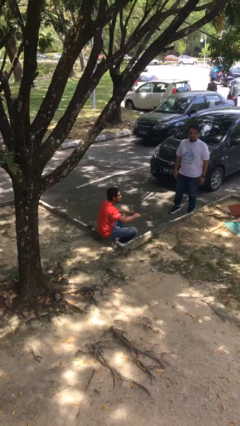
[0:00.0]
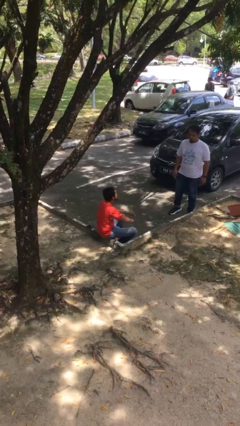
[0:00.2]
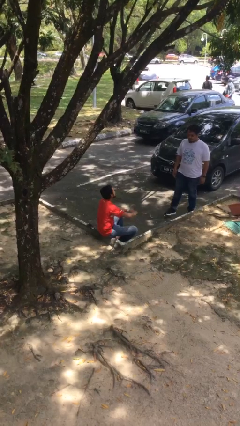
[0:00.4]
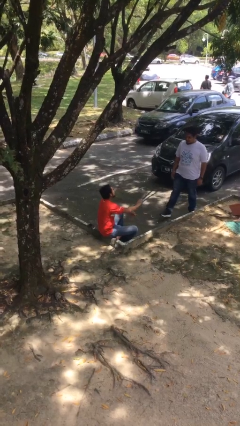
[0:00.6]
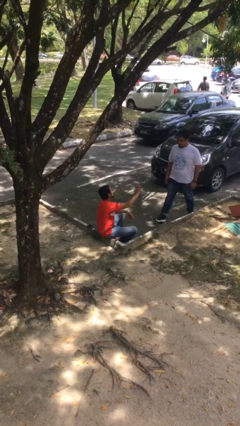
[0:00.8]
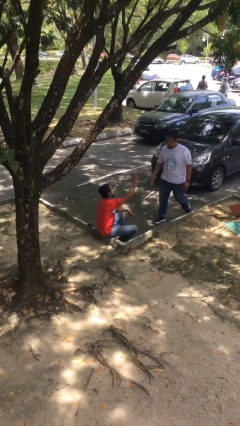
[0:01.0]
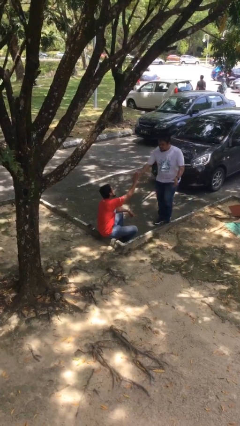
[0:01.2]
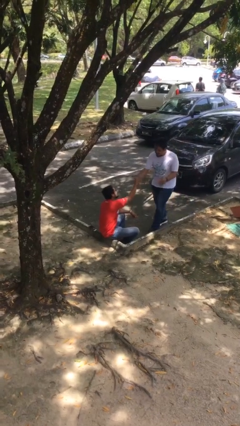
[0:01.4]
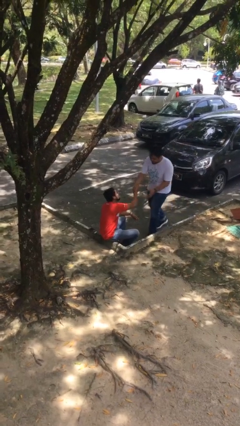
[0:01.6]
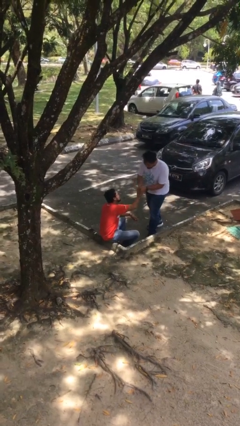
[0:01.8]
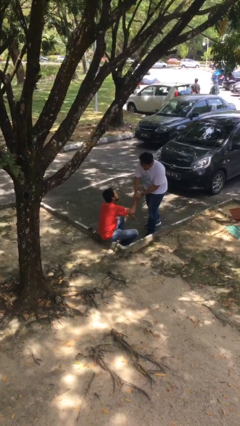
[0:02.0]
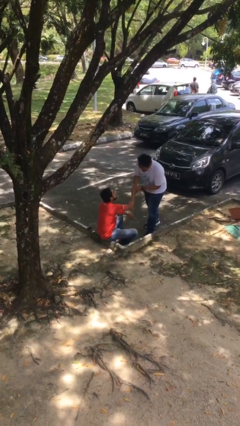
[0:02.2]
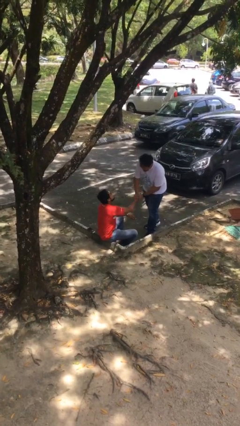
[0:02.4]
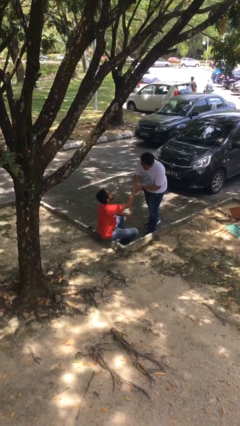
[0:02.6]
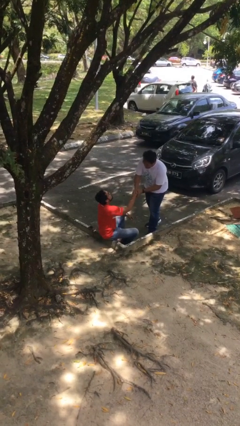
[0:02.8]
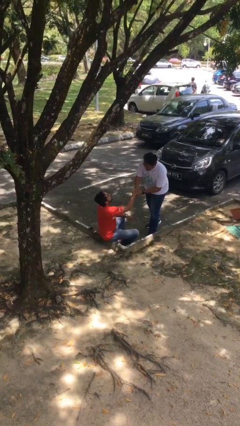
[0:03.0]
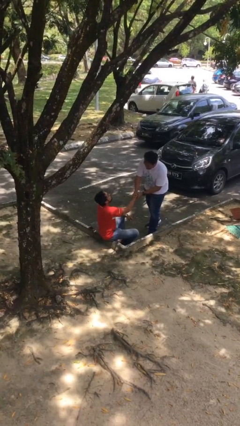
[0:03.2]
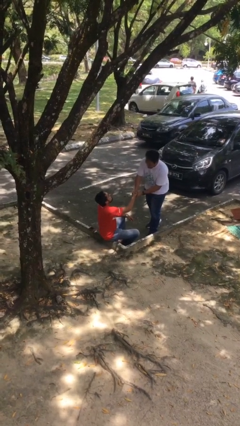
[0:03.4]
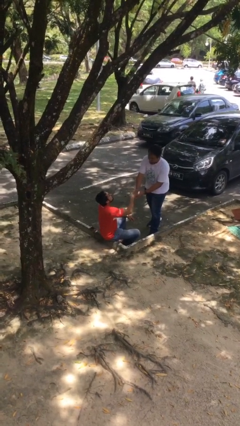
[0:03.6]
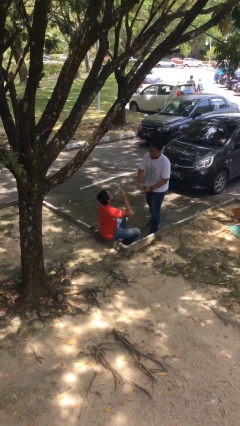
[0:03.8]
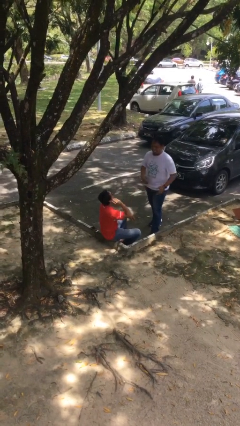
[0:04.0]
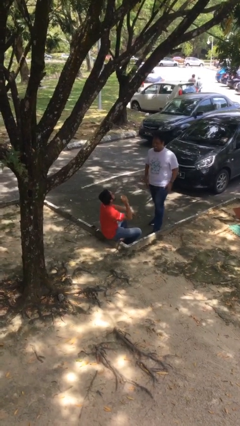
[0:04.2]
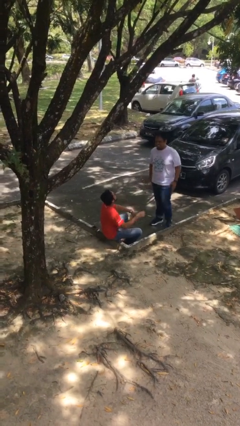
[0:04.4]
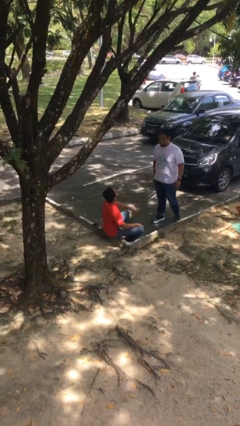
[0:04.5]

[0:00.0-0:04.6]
person shakes hand

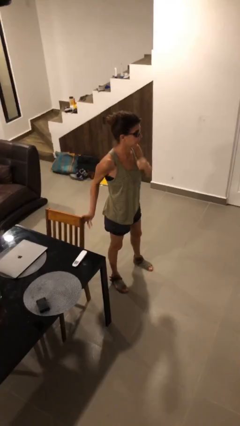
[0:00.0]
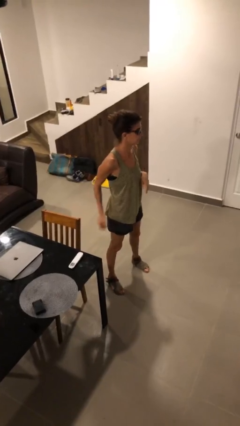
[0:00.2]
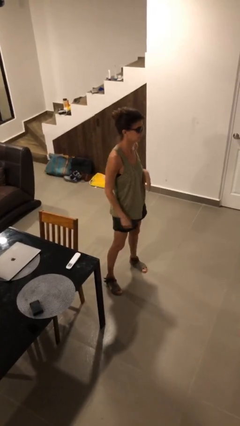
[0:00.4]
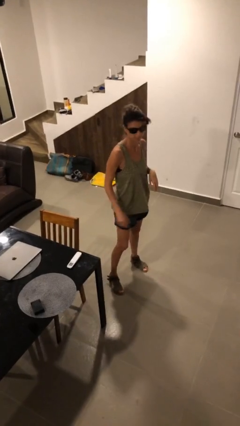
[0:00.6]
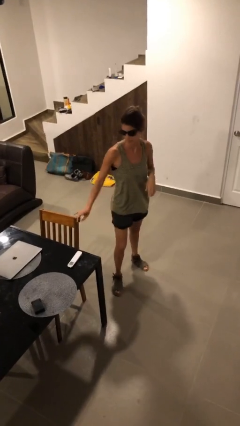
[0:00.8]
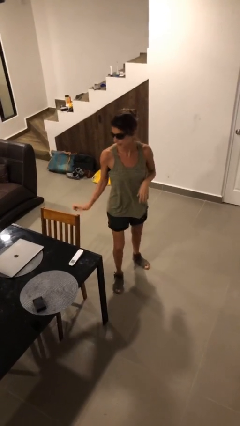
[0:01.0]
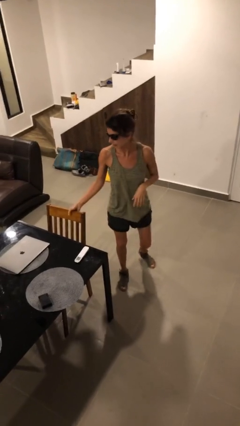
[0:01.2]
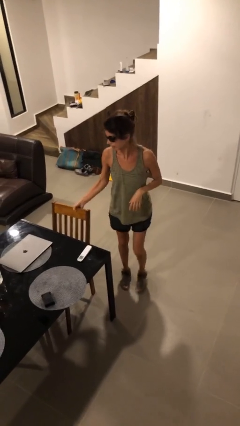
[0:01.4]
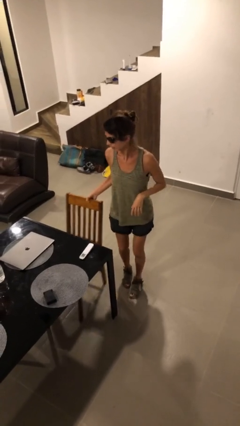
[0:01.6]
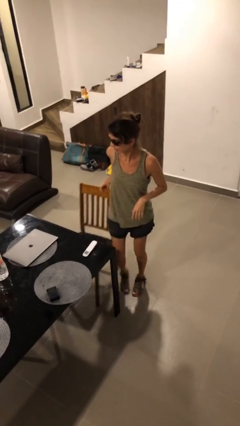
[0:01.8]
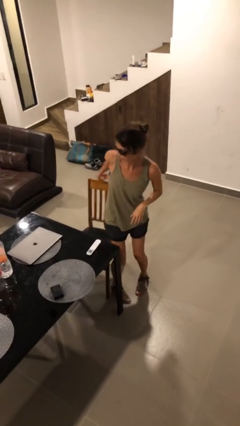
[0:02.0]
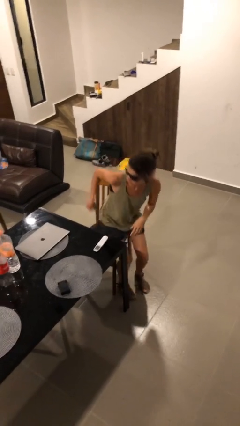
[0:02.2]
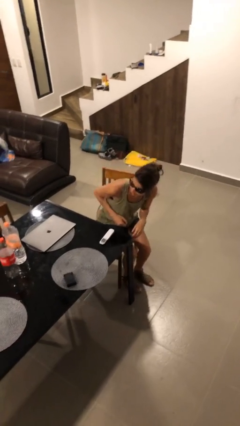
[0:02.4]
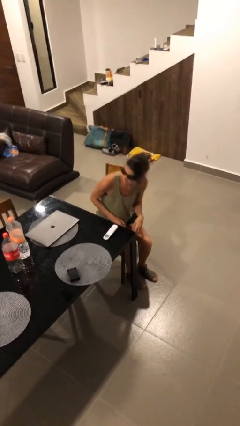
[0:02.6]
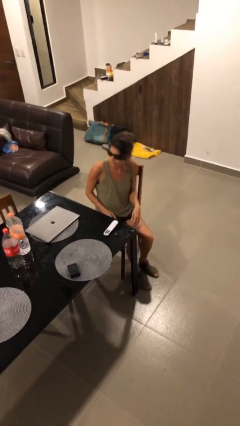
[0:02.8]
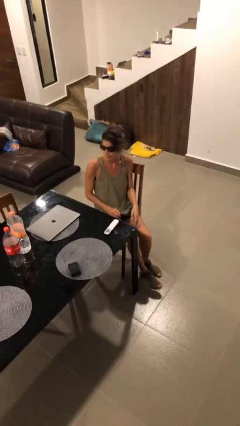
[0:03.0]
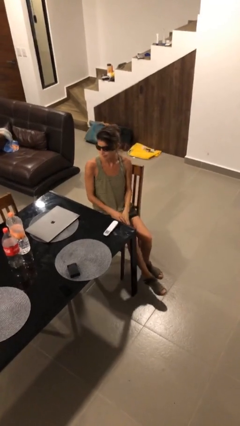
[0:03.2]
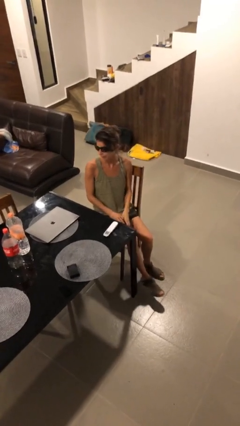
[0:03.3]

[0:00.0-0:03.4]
person sits down

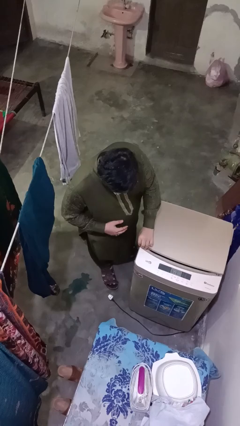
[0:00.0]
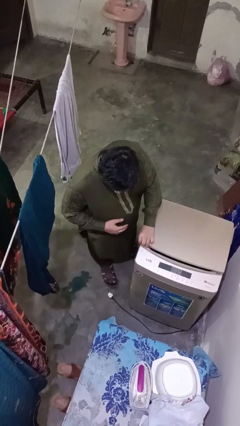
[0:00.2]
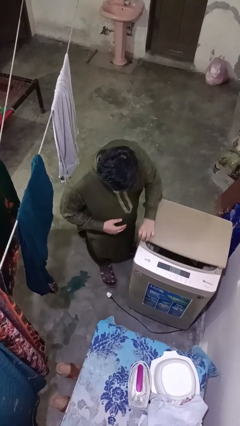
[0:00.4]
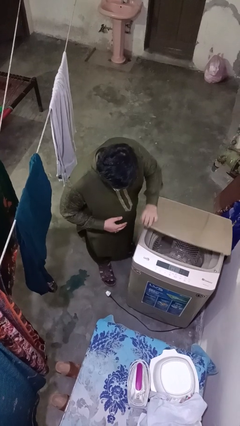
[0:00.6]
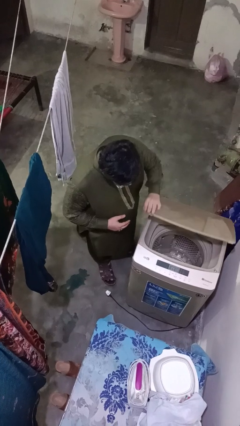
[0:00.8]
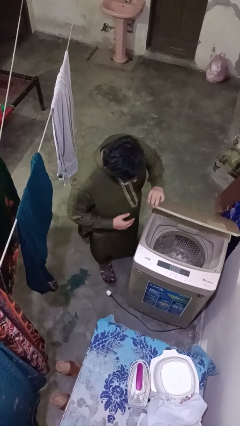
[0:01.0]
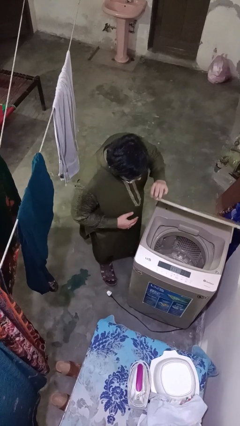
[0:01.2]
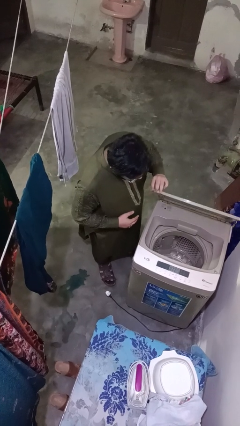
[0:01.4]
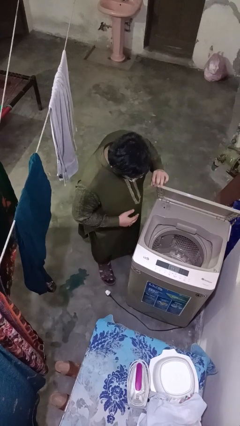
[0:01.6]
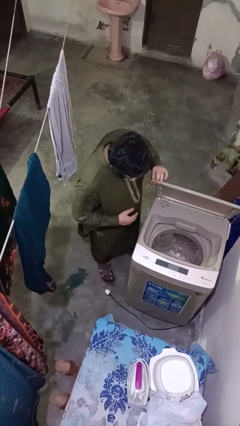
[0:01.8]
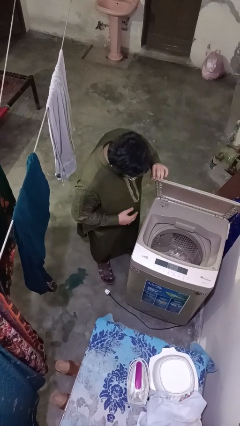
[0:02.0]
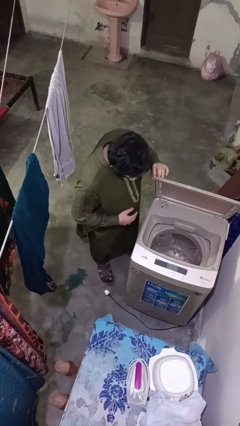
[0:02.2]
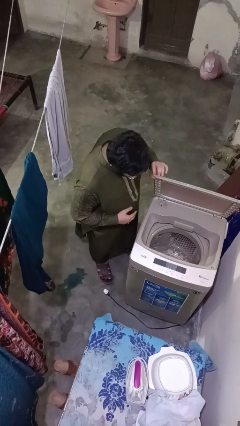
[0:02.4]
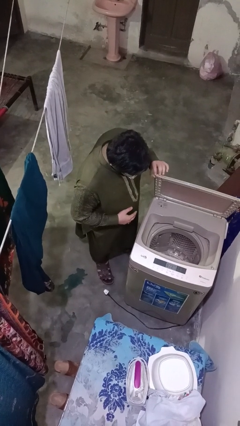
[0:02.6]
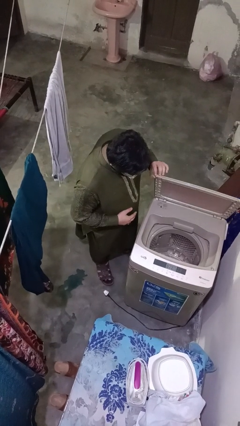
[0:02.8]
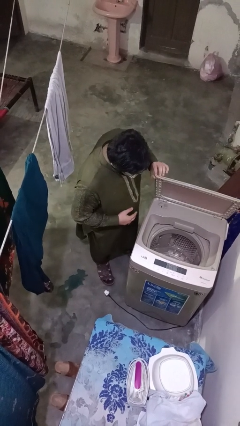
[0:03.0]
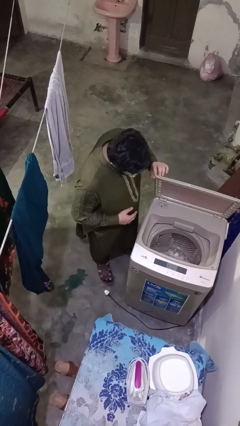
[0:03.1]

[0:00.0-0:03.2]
person opens clothes washer

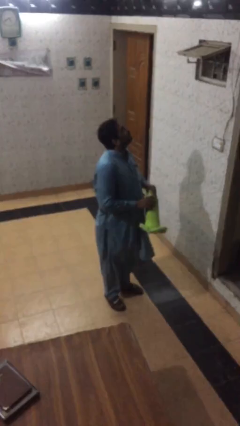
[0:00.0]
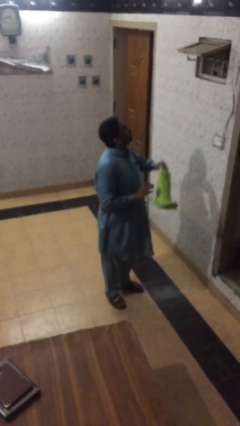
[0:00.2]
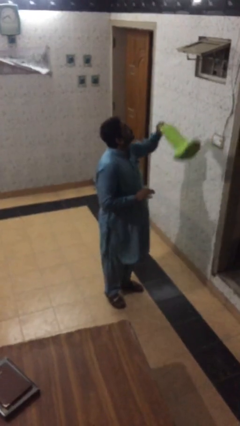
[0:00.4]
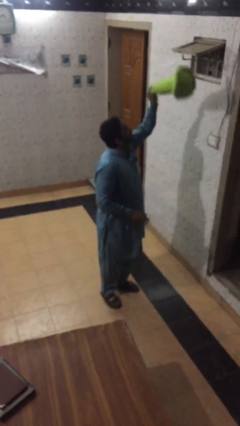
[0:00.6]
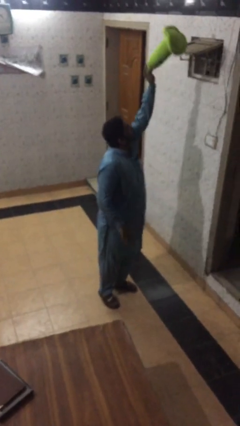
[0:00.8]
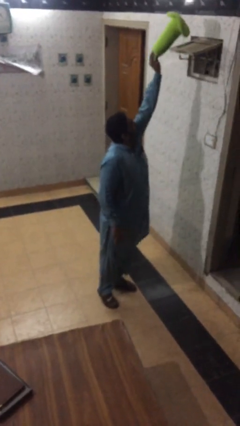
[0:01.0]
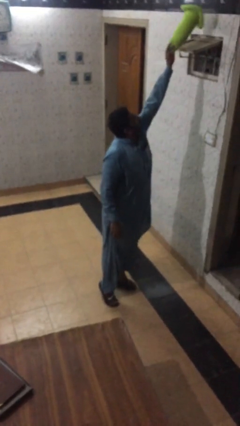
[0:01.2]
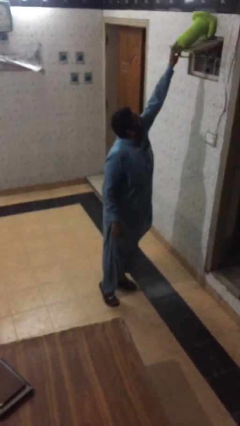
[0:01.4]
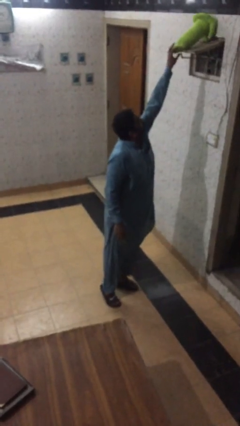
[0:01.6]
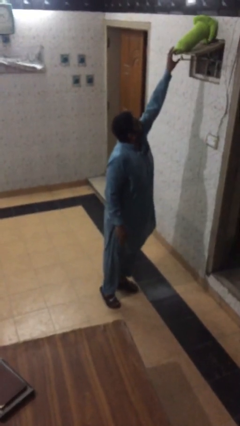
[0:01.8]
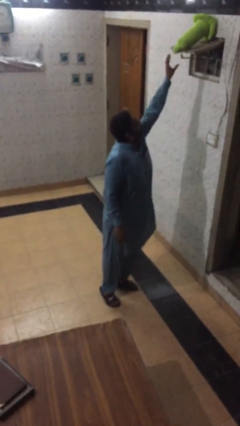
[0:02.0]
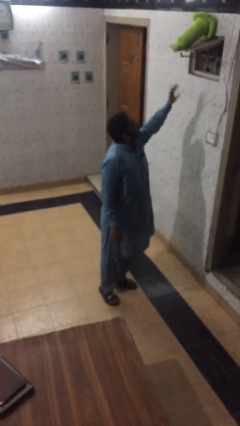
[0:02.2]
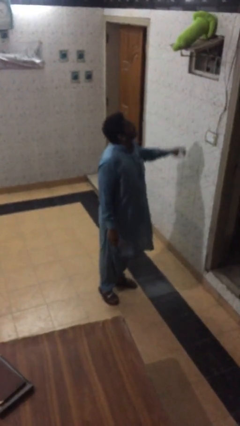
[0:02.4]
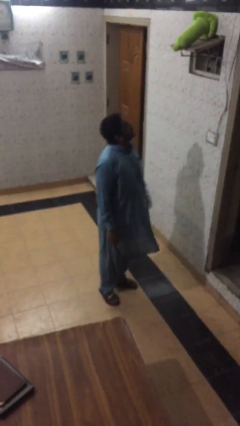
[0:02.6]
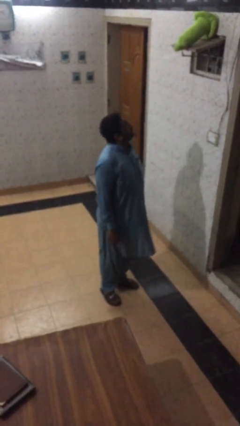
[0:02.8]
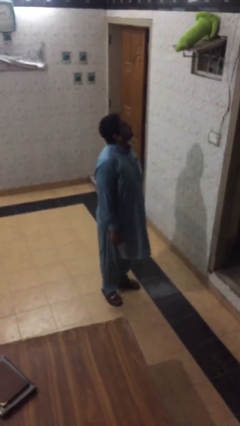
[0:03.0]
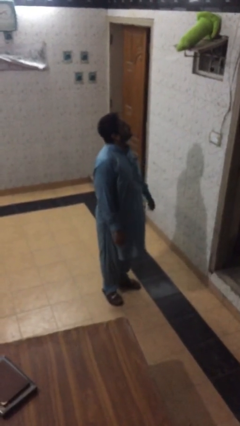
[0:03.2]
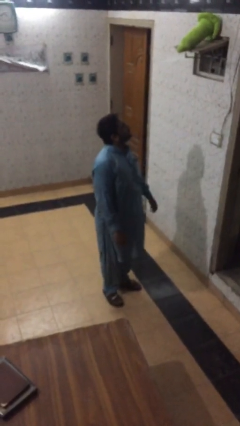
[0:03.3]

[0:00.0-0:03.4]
person puts down object on shelf

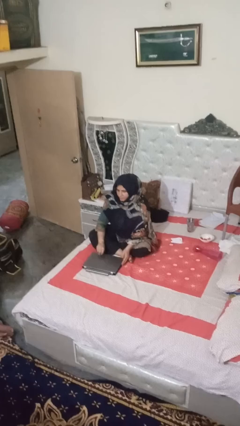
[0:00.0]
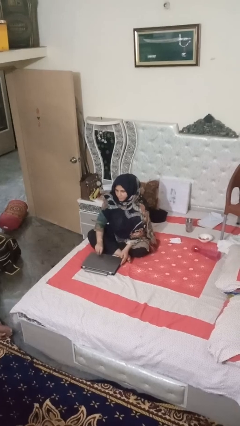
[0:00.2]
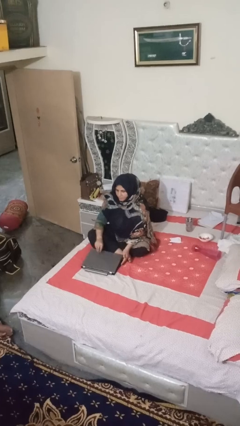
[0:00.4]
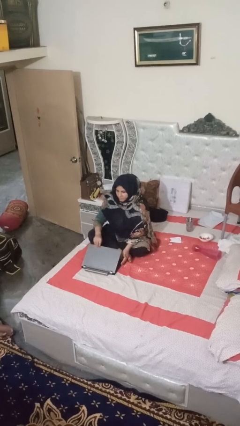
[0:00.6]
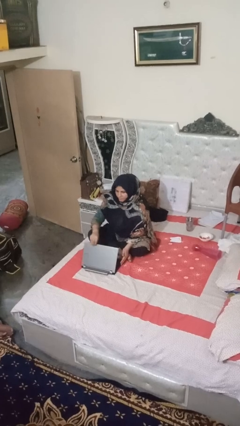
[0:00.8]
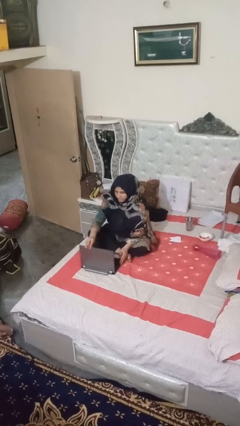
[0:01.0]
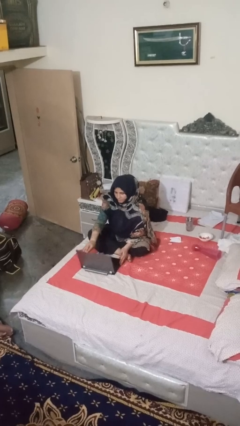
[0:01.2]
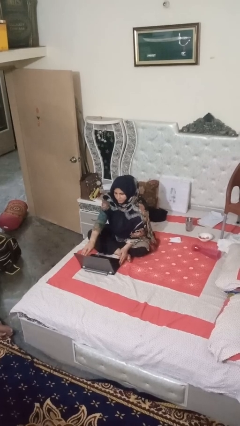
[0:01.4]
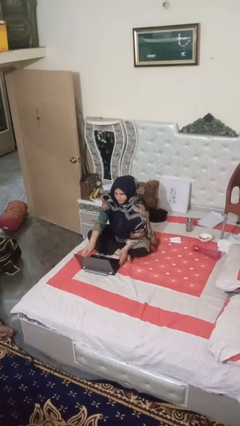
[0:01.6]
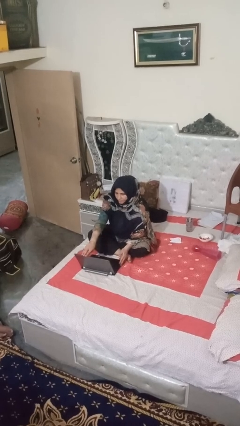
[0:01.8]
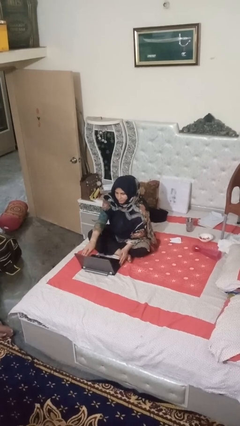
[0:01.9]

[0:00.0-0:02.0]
person opens laptop

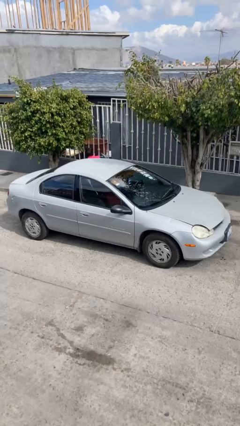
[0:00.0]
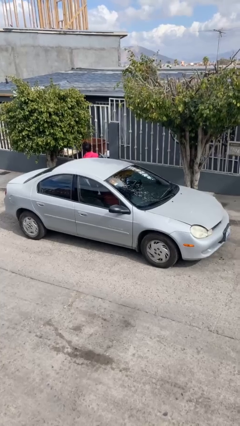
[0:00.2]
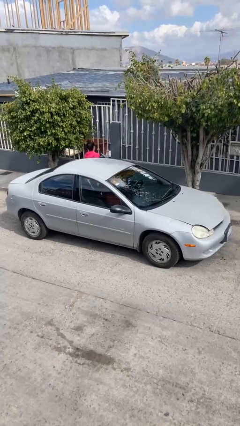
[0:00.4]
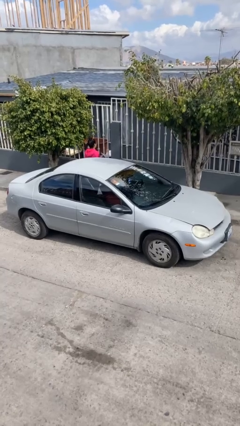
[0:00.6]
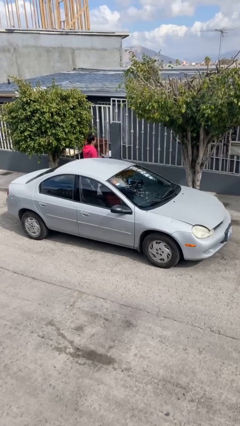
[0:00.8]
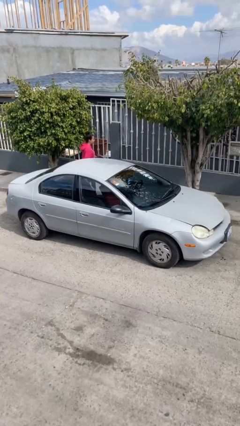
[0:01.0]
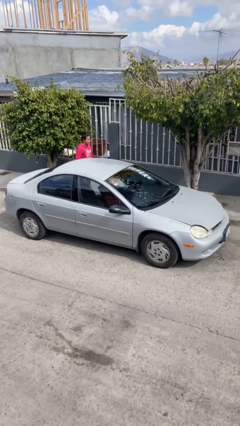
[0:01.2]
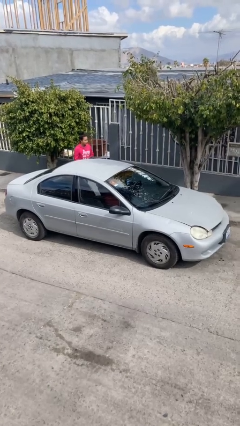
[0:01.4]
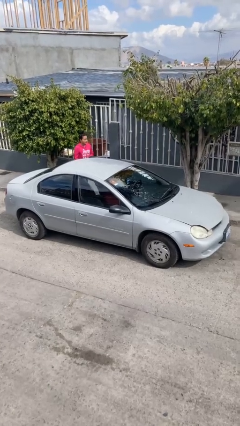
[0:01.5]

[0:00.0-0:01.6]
car drops off person
